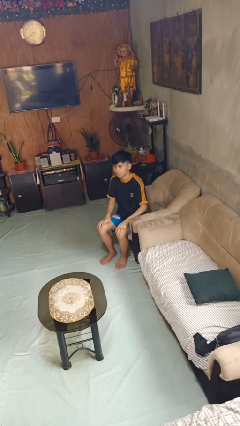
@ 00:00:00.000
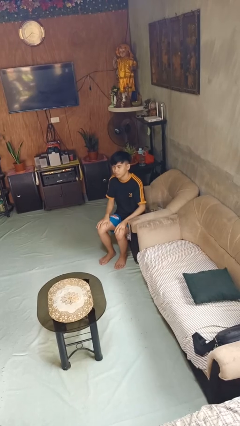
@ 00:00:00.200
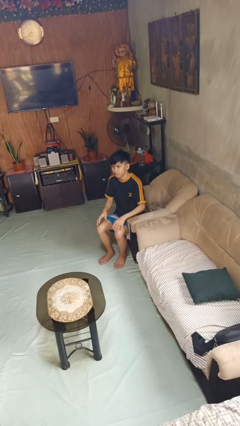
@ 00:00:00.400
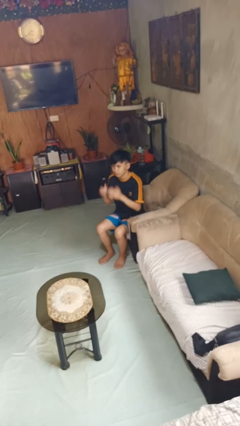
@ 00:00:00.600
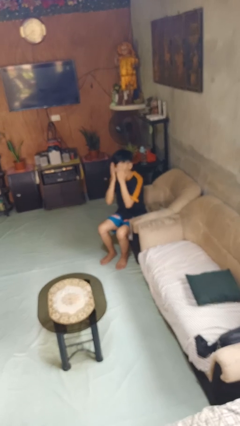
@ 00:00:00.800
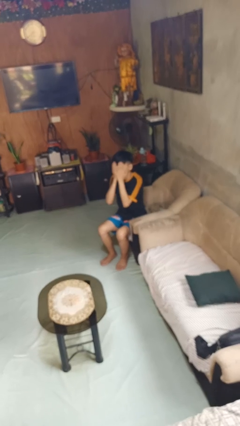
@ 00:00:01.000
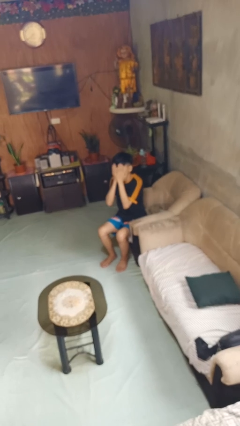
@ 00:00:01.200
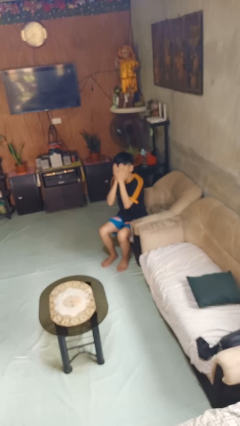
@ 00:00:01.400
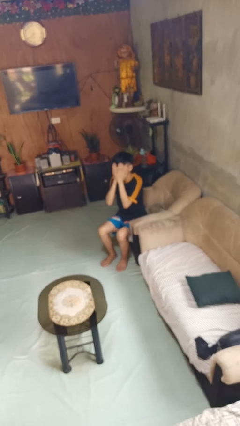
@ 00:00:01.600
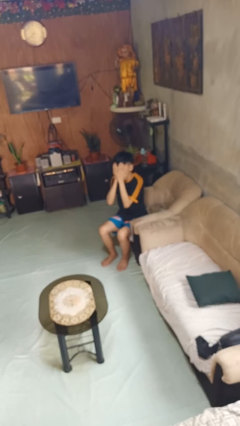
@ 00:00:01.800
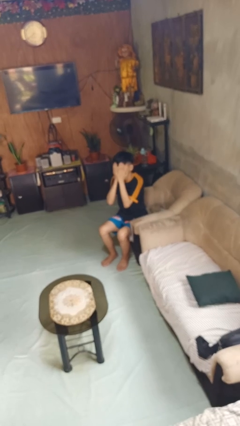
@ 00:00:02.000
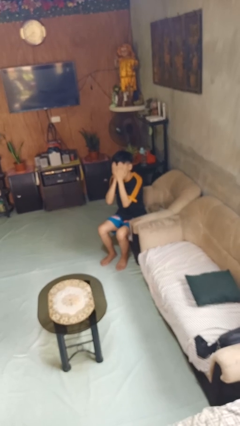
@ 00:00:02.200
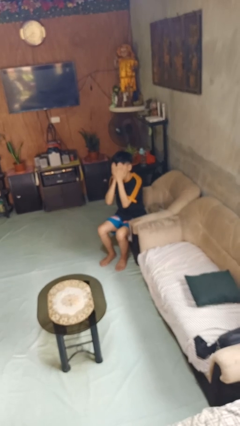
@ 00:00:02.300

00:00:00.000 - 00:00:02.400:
person covers face with hands

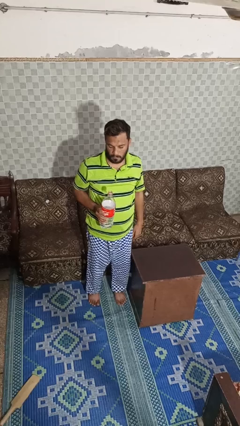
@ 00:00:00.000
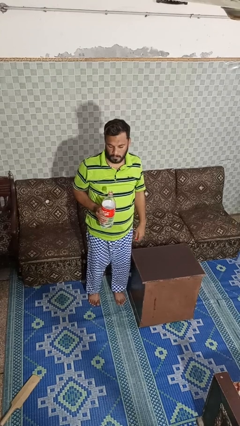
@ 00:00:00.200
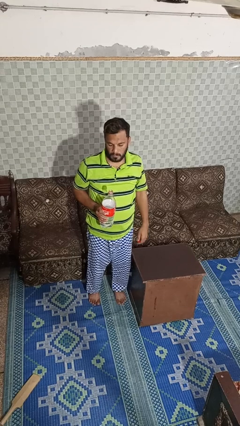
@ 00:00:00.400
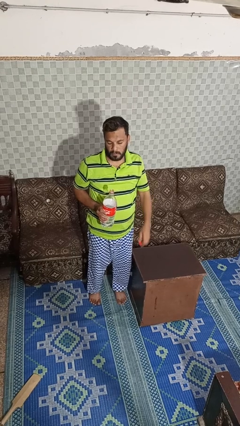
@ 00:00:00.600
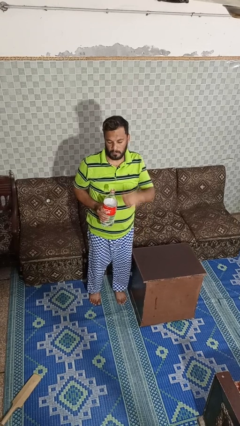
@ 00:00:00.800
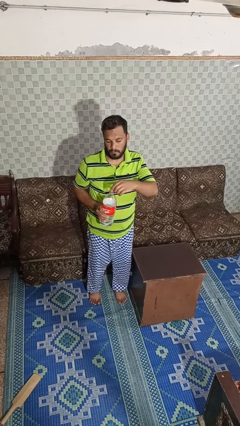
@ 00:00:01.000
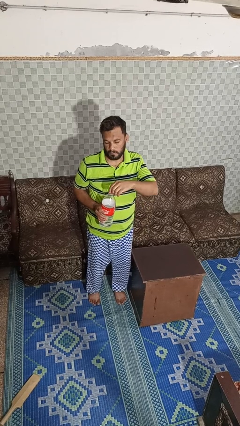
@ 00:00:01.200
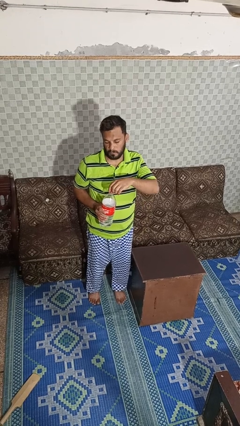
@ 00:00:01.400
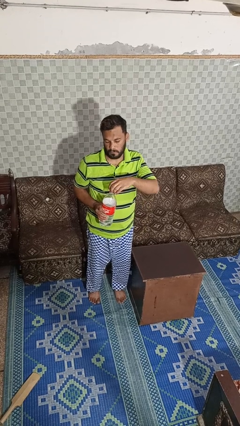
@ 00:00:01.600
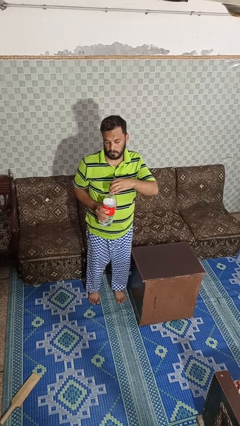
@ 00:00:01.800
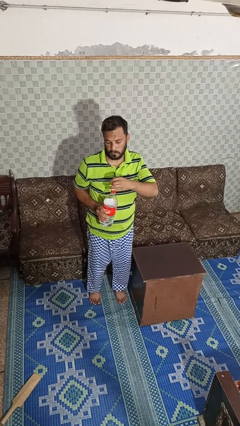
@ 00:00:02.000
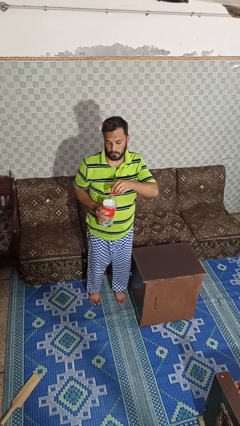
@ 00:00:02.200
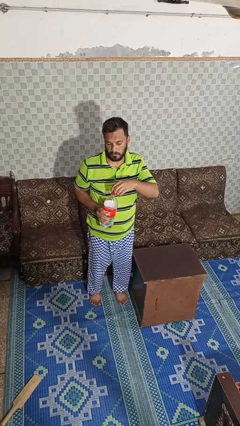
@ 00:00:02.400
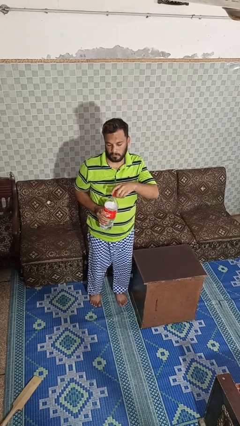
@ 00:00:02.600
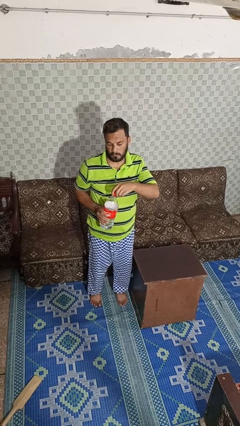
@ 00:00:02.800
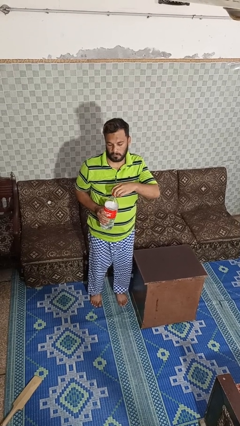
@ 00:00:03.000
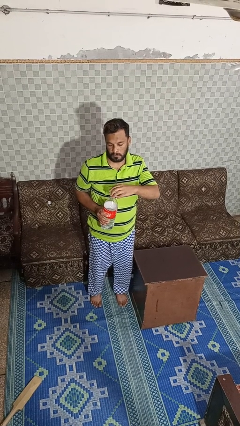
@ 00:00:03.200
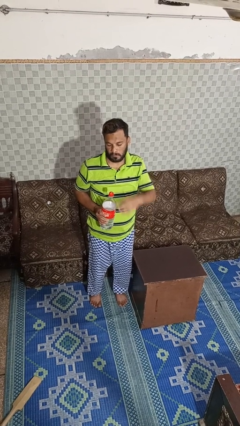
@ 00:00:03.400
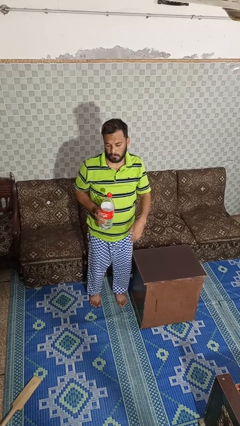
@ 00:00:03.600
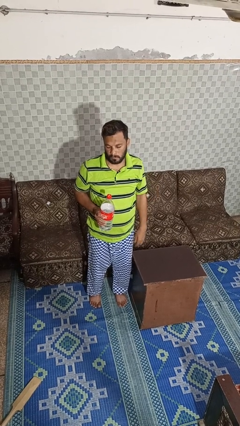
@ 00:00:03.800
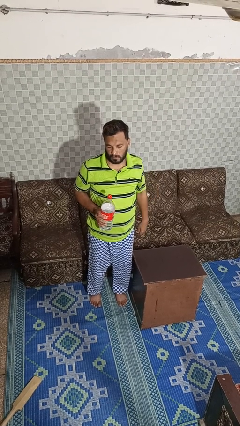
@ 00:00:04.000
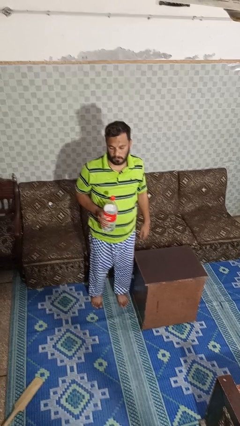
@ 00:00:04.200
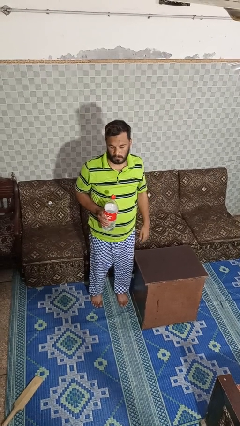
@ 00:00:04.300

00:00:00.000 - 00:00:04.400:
person screws lid to bottle

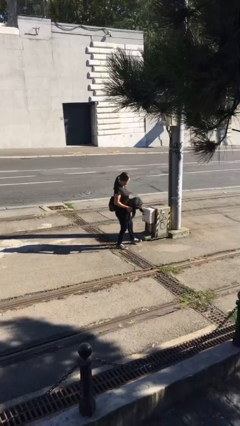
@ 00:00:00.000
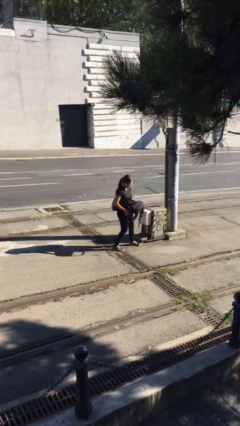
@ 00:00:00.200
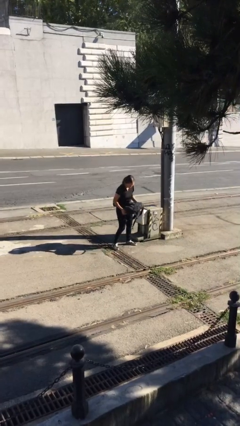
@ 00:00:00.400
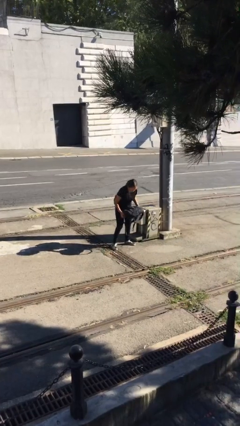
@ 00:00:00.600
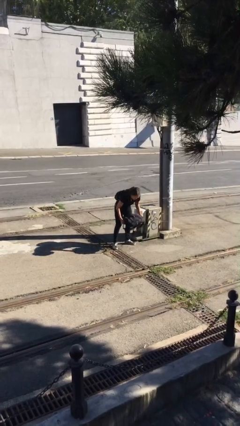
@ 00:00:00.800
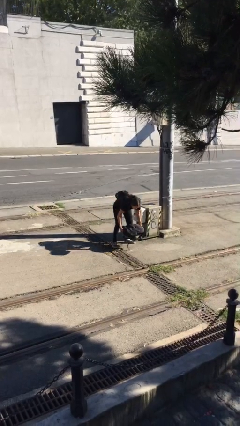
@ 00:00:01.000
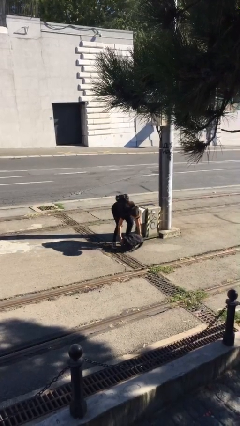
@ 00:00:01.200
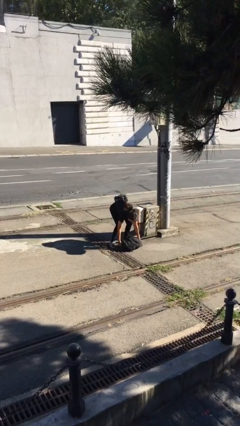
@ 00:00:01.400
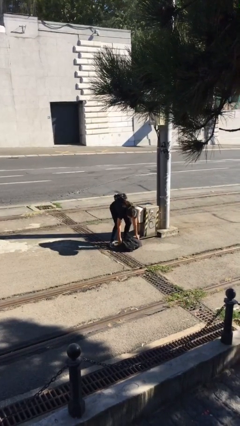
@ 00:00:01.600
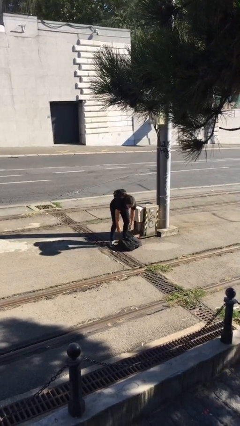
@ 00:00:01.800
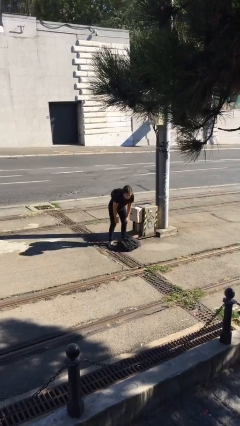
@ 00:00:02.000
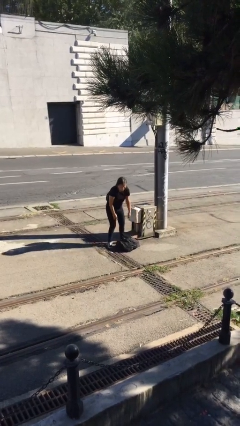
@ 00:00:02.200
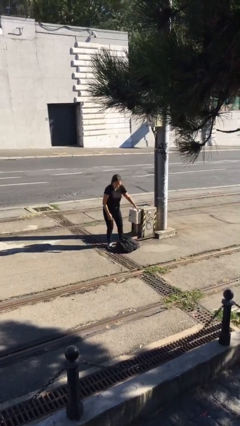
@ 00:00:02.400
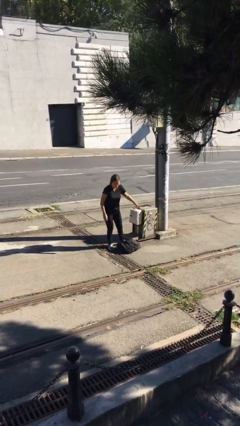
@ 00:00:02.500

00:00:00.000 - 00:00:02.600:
person puts down object on floor

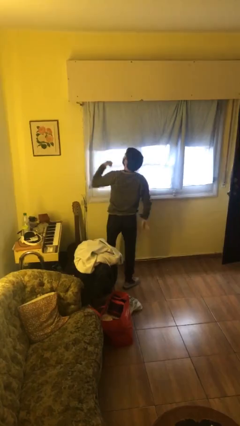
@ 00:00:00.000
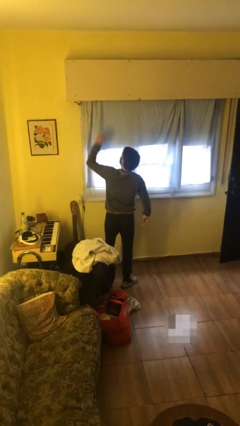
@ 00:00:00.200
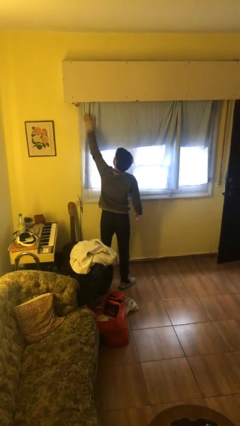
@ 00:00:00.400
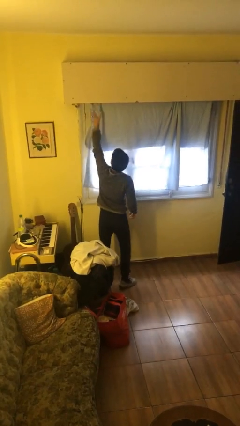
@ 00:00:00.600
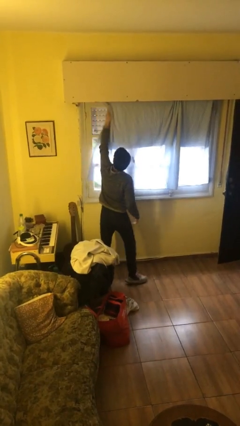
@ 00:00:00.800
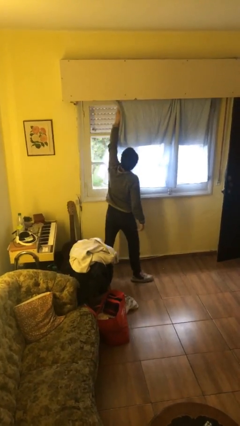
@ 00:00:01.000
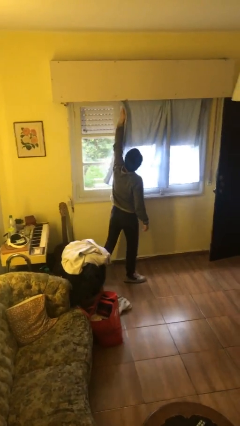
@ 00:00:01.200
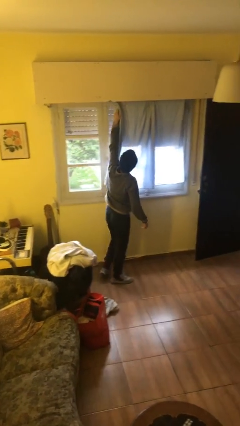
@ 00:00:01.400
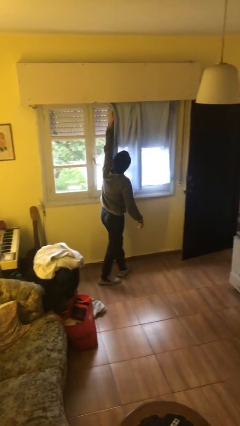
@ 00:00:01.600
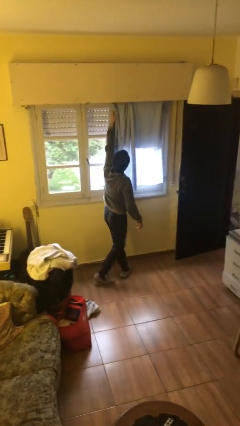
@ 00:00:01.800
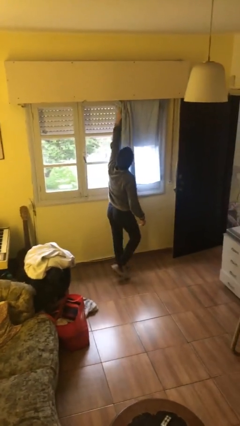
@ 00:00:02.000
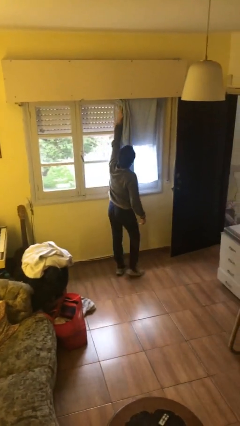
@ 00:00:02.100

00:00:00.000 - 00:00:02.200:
person opens curtains

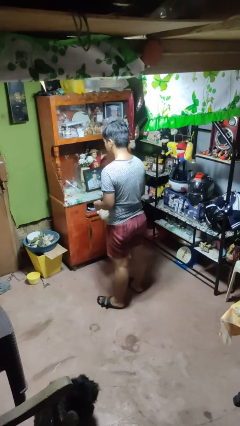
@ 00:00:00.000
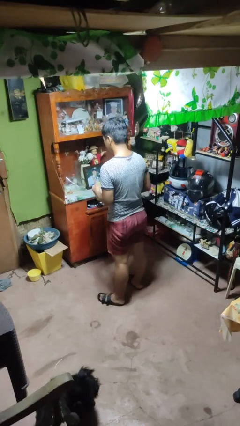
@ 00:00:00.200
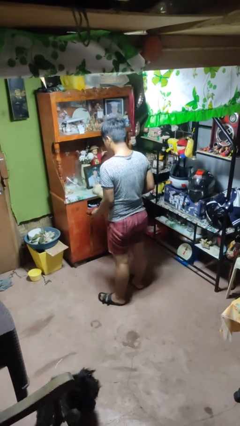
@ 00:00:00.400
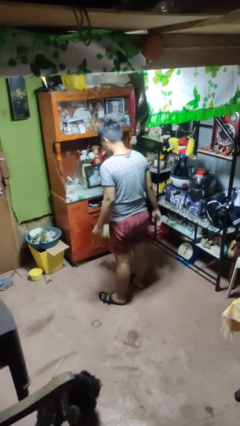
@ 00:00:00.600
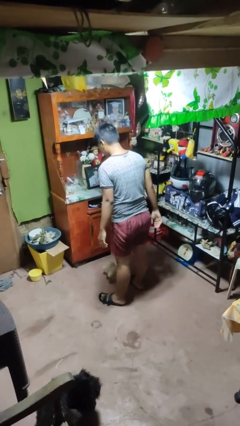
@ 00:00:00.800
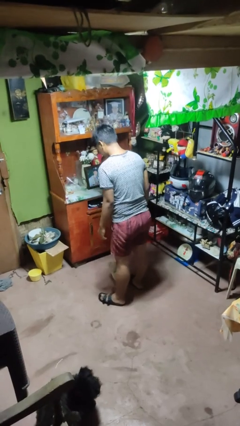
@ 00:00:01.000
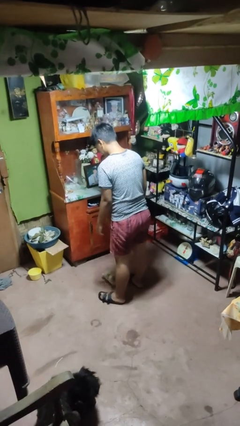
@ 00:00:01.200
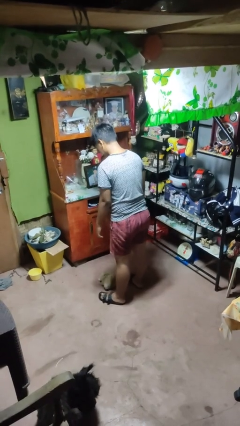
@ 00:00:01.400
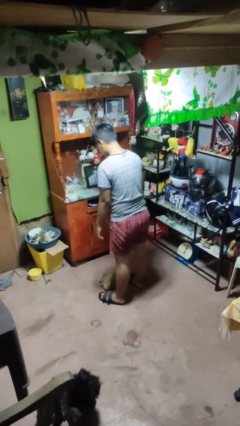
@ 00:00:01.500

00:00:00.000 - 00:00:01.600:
person drops object

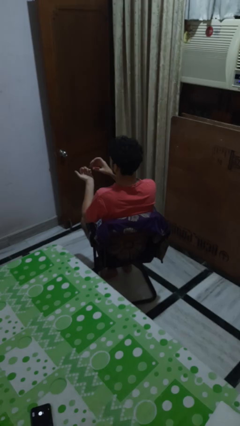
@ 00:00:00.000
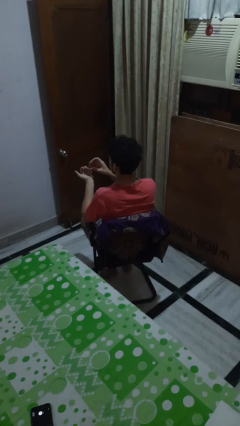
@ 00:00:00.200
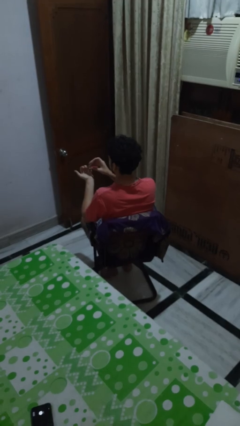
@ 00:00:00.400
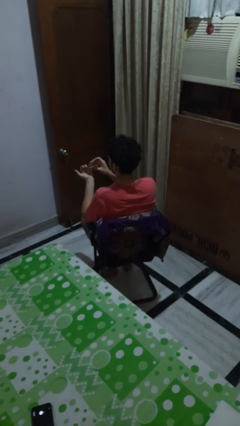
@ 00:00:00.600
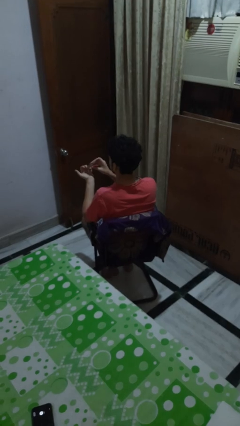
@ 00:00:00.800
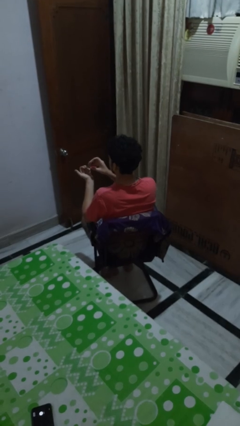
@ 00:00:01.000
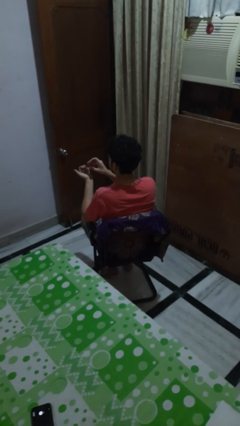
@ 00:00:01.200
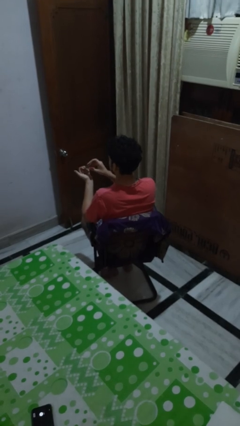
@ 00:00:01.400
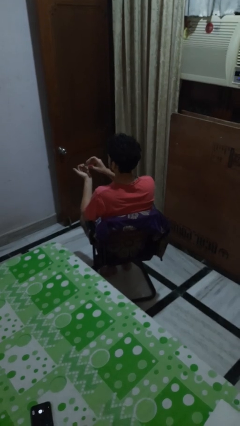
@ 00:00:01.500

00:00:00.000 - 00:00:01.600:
person clips fingernails

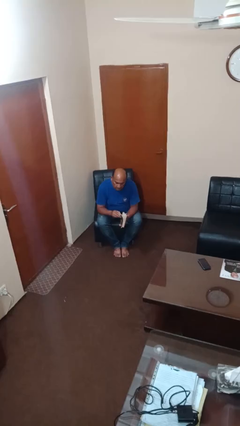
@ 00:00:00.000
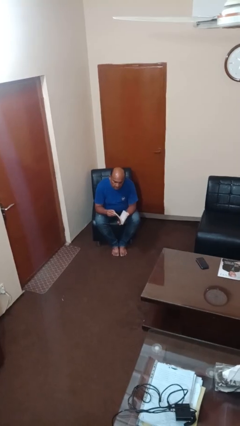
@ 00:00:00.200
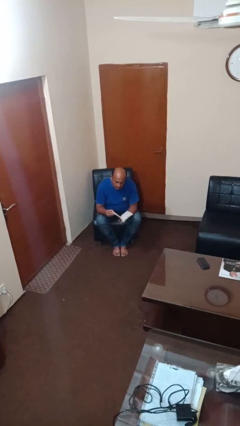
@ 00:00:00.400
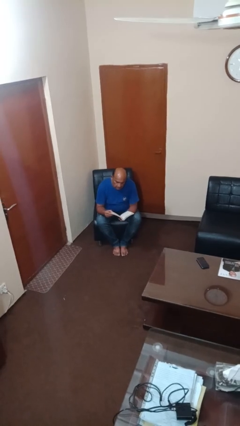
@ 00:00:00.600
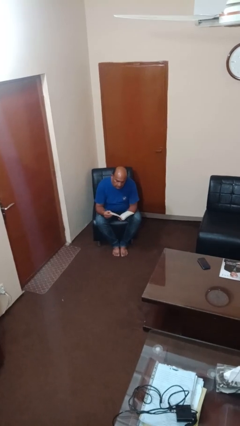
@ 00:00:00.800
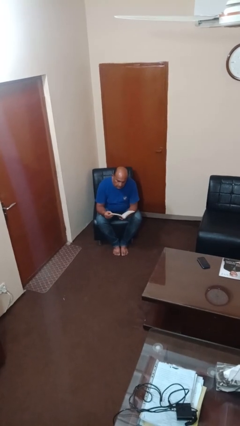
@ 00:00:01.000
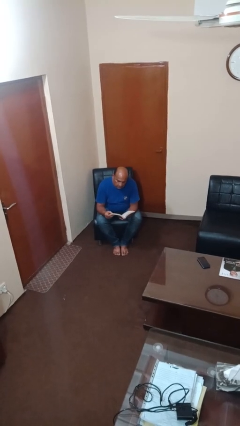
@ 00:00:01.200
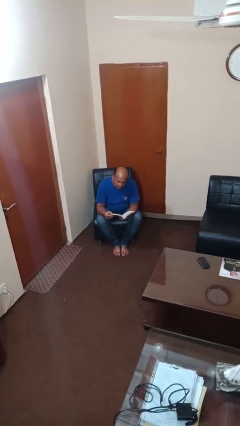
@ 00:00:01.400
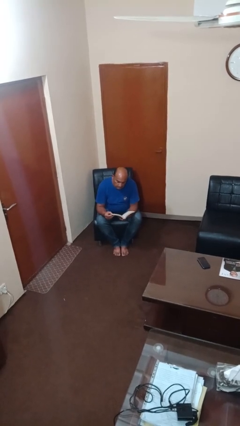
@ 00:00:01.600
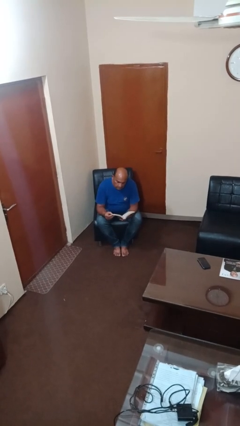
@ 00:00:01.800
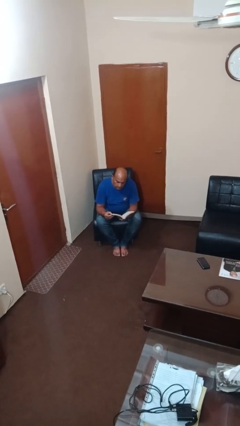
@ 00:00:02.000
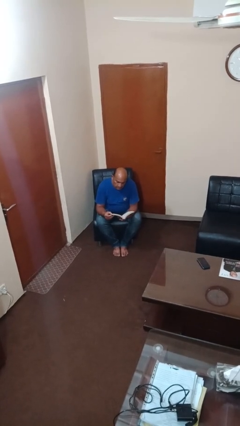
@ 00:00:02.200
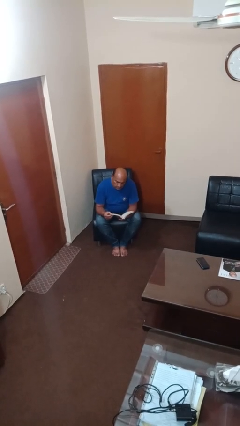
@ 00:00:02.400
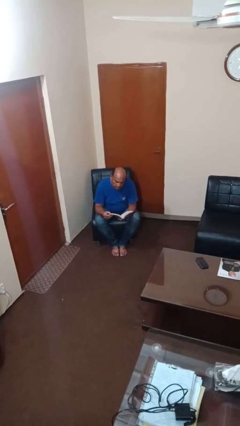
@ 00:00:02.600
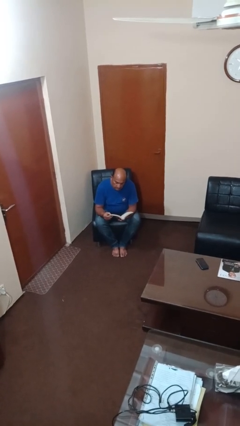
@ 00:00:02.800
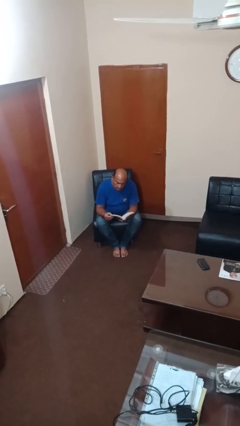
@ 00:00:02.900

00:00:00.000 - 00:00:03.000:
person reads book
